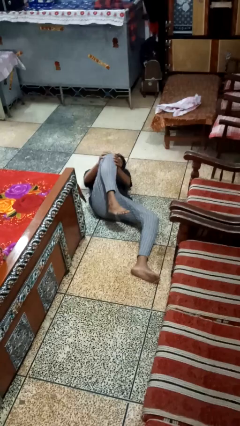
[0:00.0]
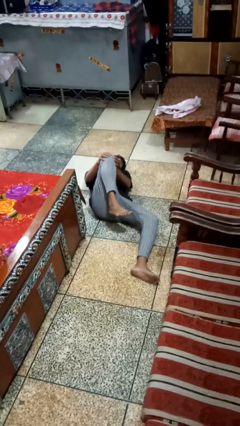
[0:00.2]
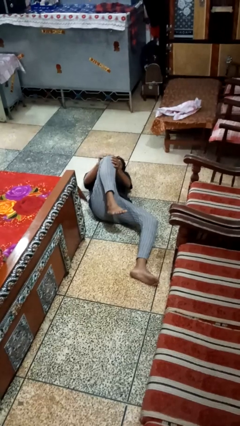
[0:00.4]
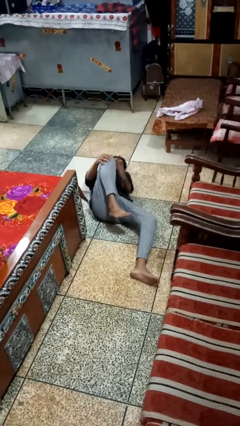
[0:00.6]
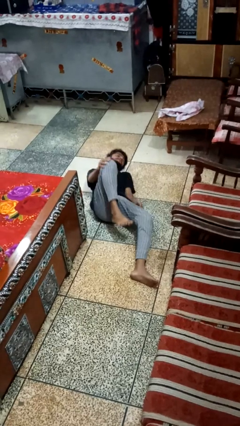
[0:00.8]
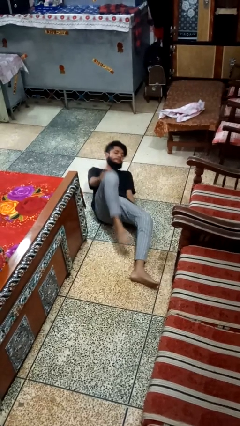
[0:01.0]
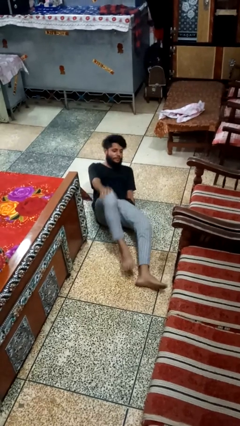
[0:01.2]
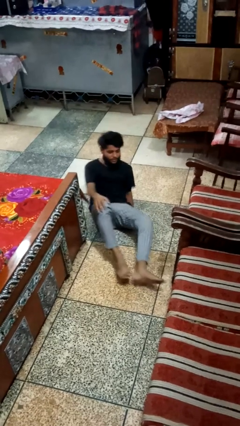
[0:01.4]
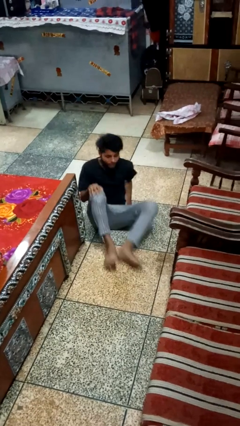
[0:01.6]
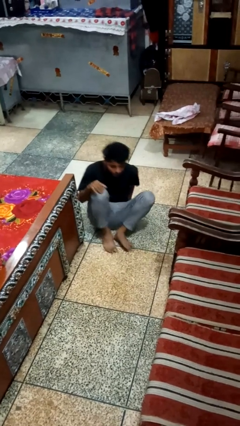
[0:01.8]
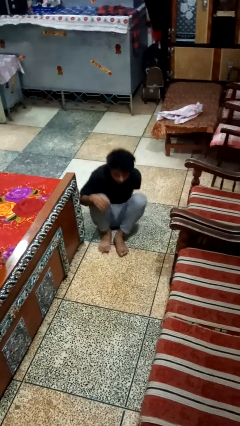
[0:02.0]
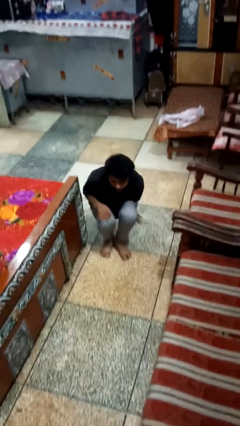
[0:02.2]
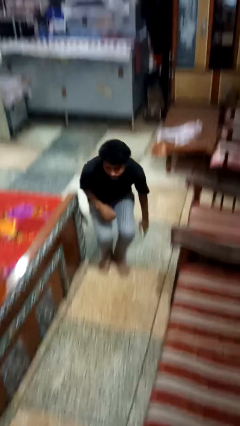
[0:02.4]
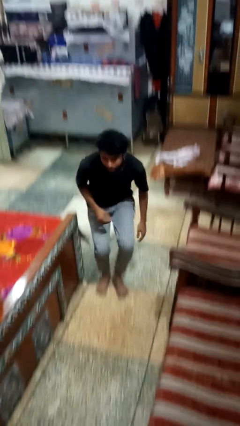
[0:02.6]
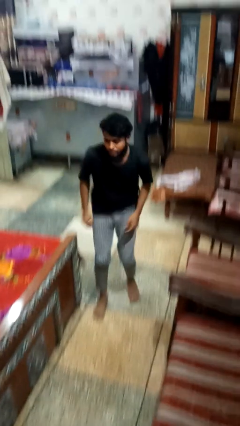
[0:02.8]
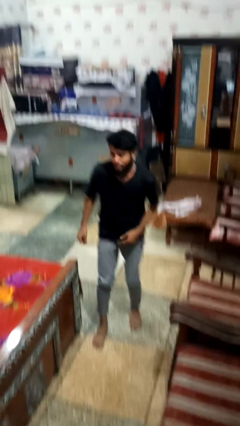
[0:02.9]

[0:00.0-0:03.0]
person stands up from floor

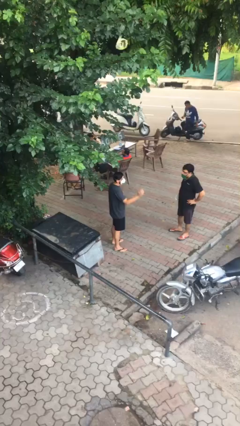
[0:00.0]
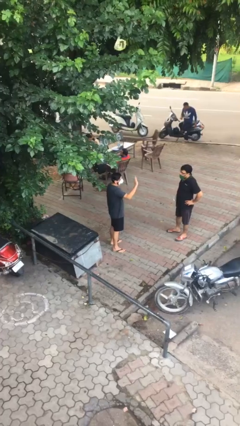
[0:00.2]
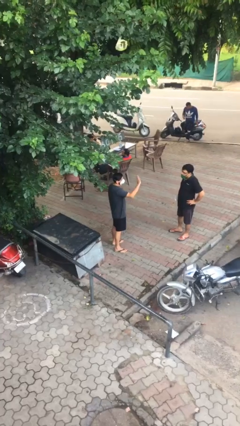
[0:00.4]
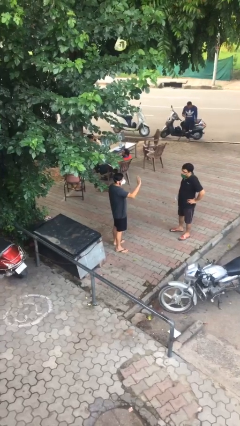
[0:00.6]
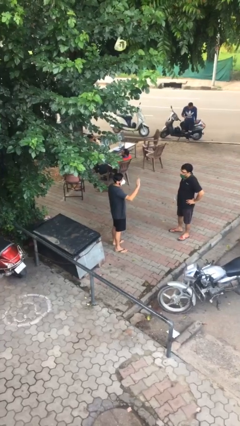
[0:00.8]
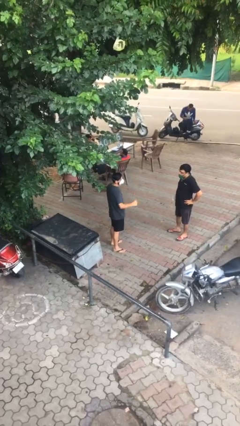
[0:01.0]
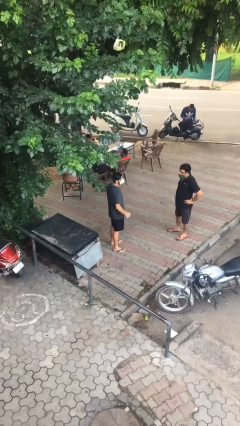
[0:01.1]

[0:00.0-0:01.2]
person waves at person

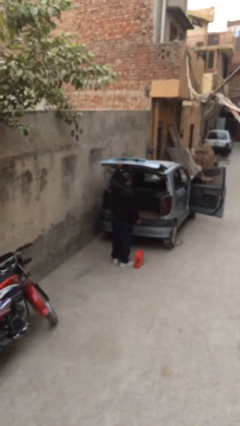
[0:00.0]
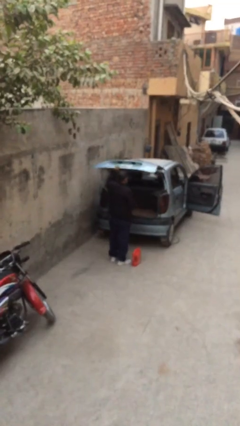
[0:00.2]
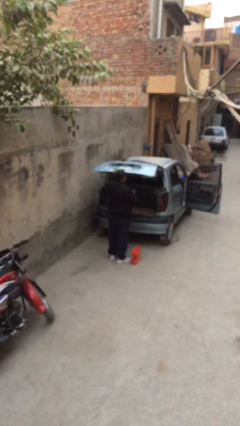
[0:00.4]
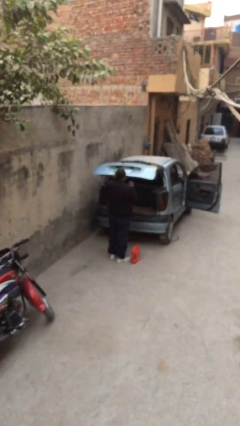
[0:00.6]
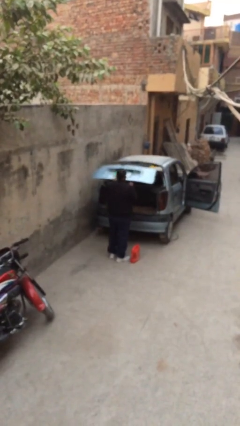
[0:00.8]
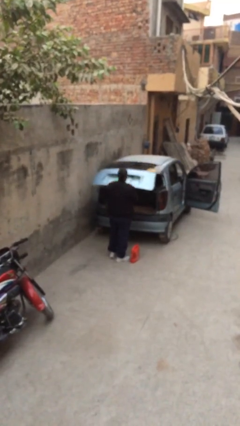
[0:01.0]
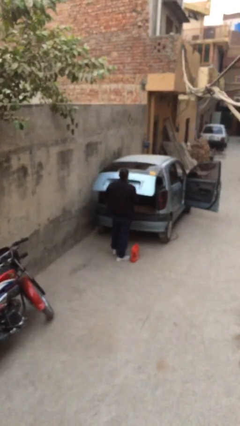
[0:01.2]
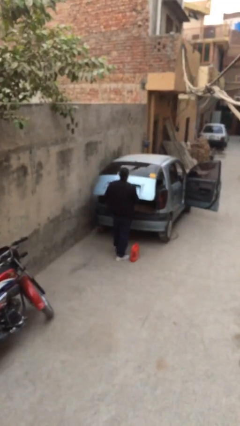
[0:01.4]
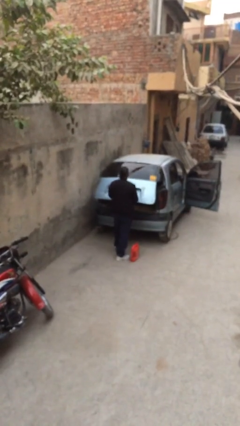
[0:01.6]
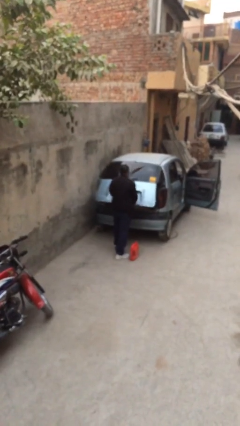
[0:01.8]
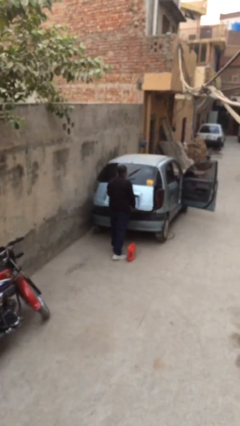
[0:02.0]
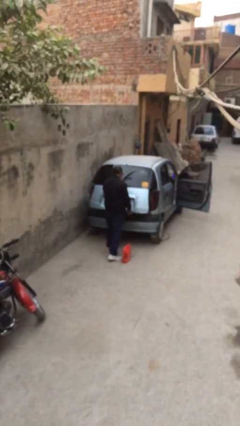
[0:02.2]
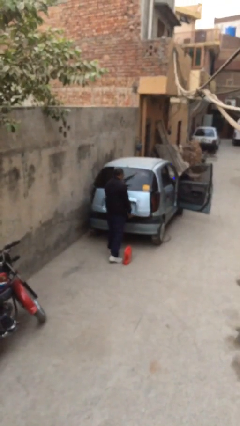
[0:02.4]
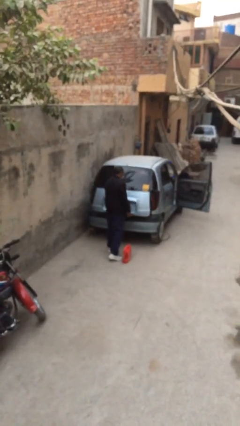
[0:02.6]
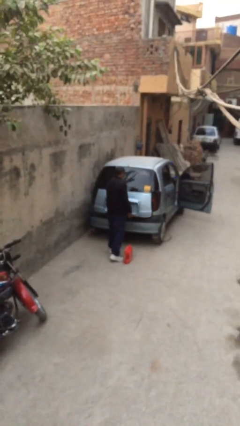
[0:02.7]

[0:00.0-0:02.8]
person closes car trunk

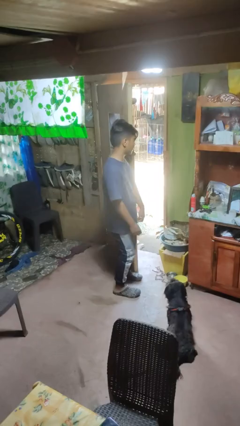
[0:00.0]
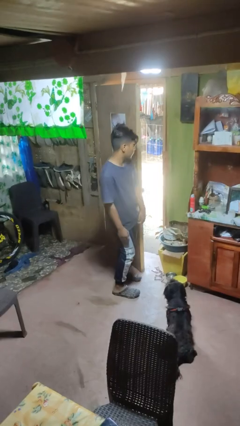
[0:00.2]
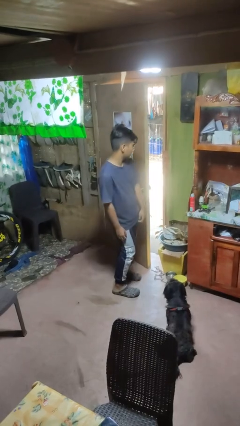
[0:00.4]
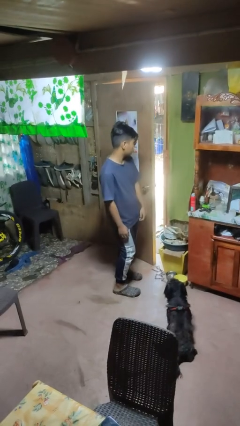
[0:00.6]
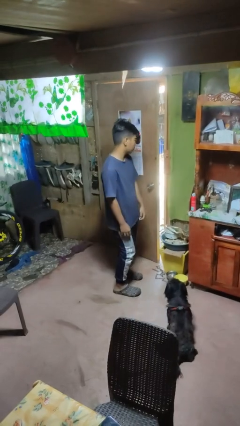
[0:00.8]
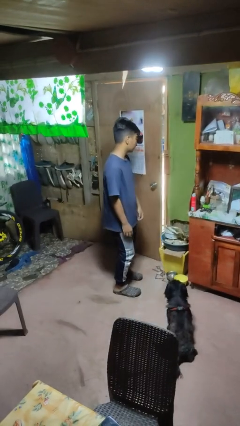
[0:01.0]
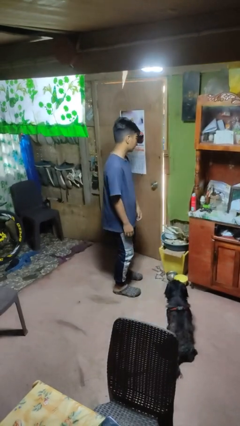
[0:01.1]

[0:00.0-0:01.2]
person closes door with hip

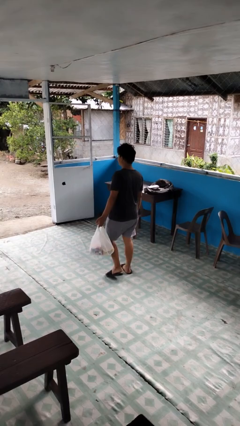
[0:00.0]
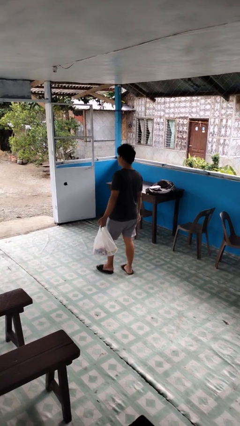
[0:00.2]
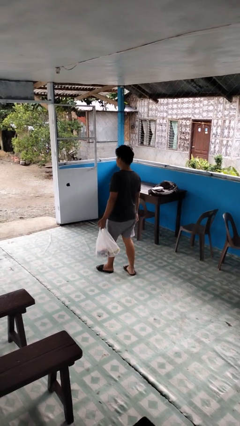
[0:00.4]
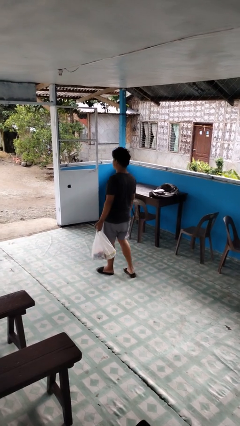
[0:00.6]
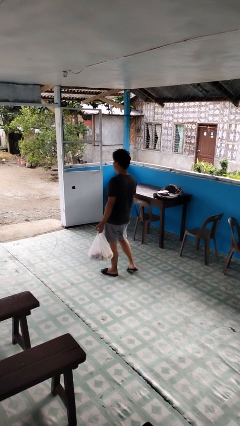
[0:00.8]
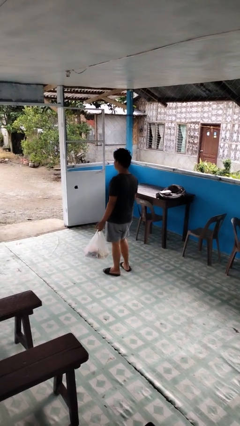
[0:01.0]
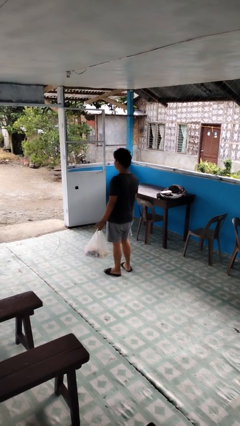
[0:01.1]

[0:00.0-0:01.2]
person carries groceries

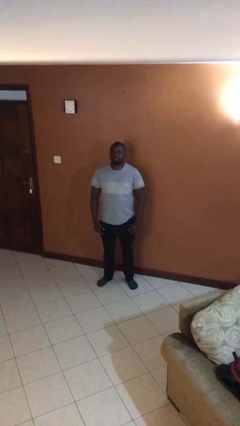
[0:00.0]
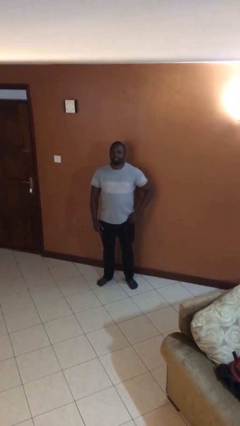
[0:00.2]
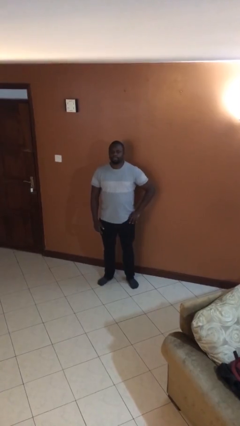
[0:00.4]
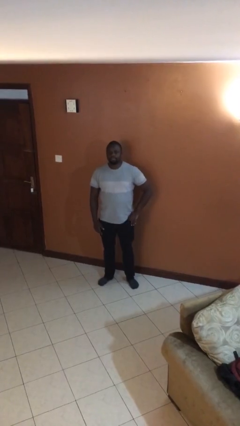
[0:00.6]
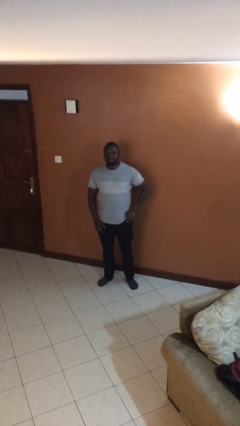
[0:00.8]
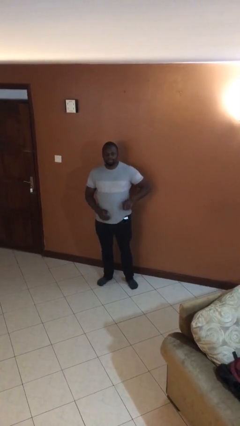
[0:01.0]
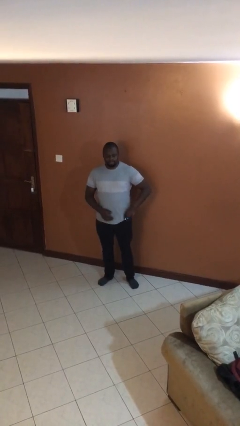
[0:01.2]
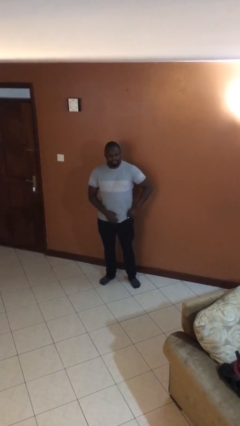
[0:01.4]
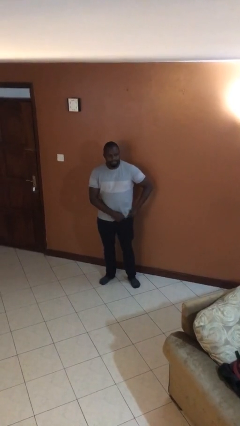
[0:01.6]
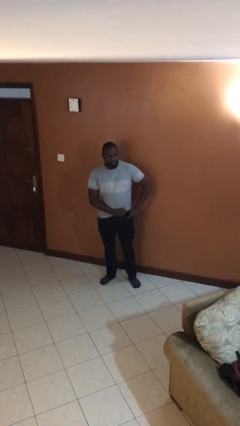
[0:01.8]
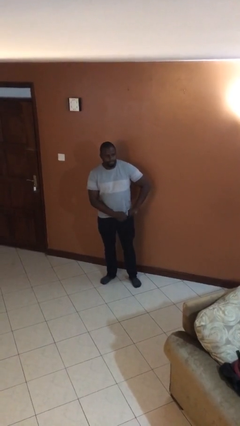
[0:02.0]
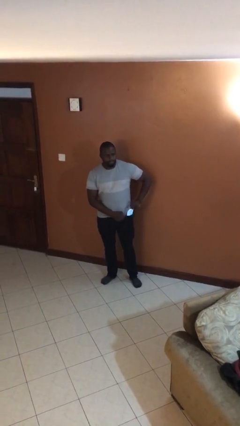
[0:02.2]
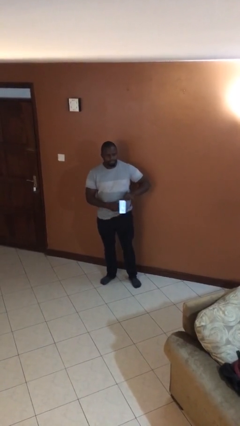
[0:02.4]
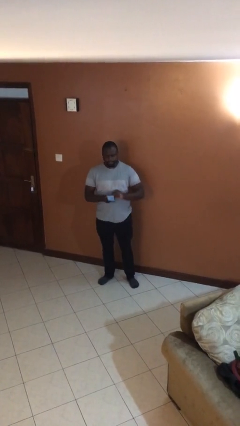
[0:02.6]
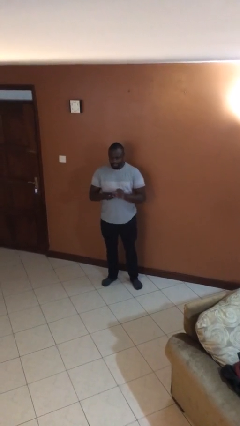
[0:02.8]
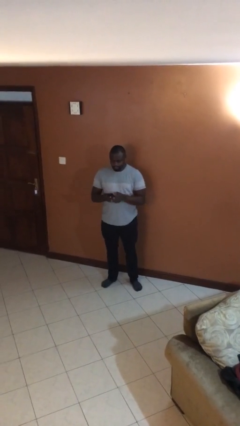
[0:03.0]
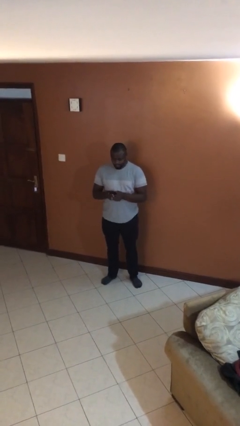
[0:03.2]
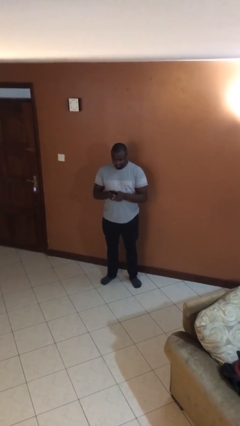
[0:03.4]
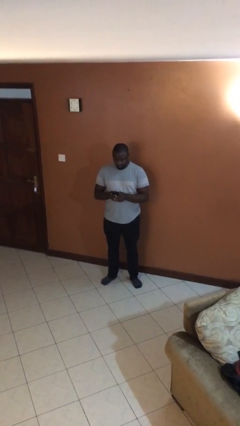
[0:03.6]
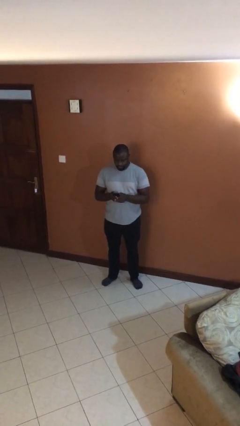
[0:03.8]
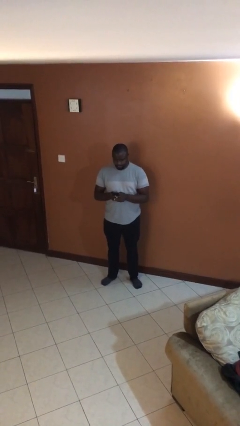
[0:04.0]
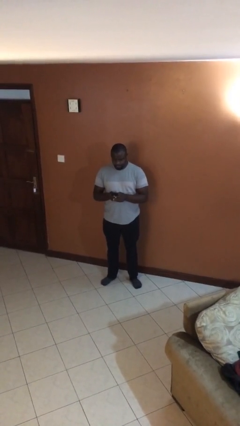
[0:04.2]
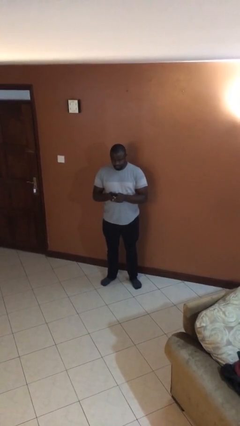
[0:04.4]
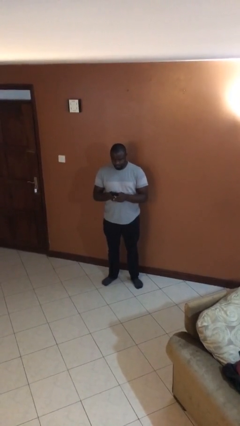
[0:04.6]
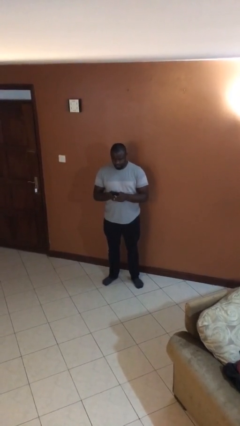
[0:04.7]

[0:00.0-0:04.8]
person takes phone from pocket

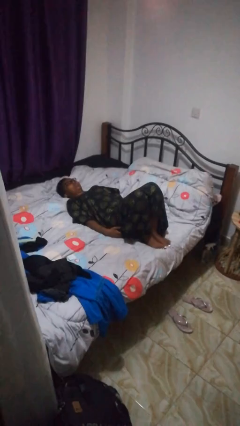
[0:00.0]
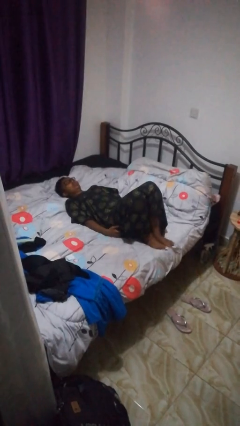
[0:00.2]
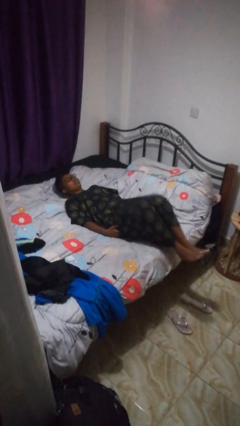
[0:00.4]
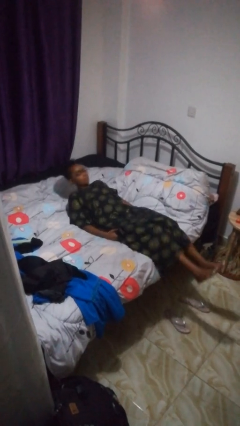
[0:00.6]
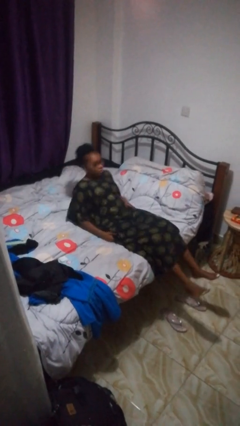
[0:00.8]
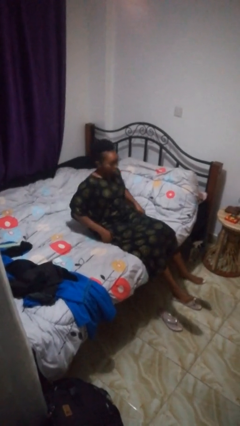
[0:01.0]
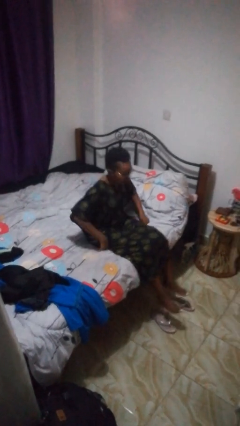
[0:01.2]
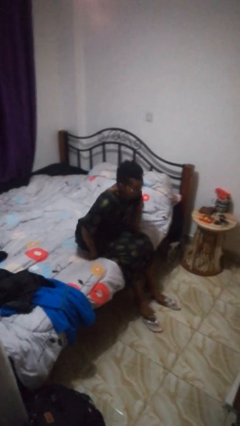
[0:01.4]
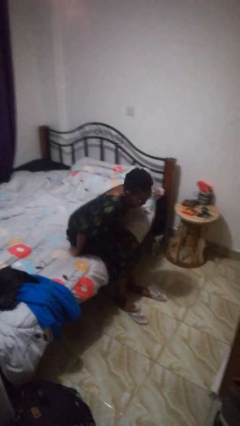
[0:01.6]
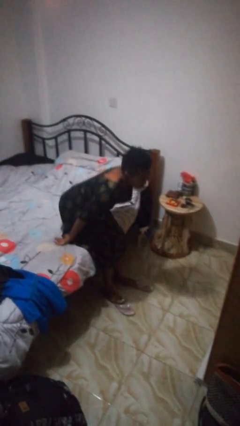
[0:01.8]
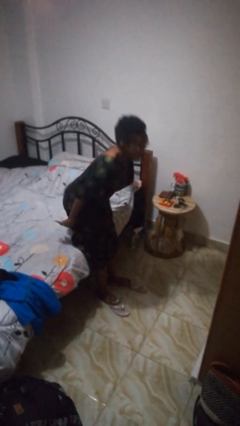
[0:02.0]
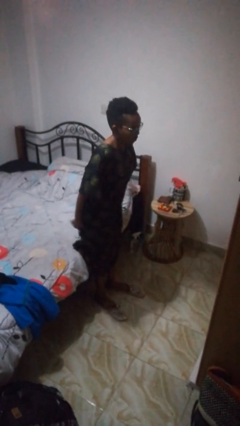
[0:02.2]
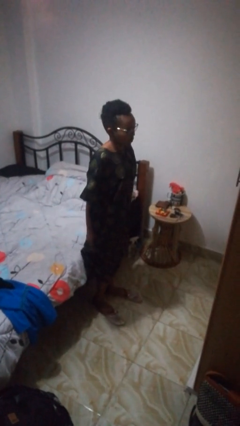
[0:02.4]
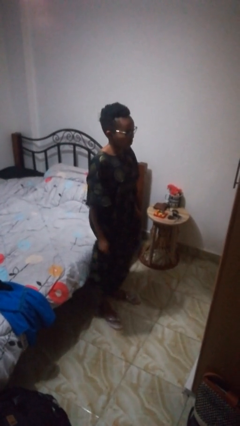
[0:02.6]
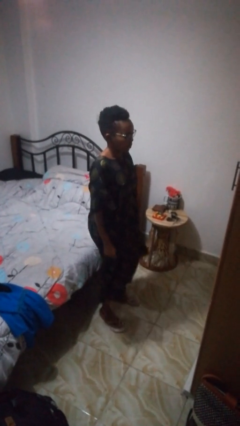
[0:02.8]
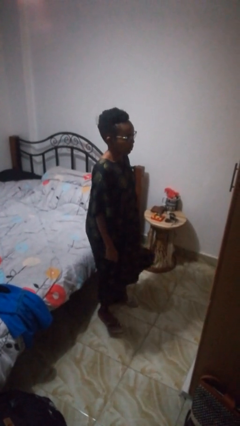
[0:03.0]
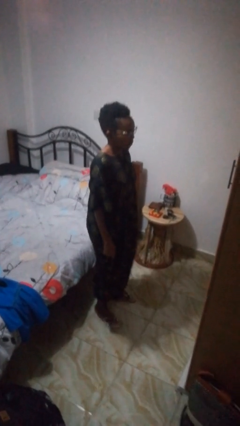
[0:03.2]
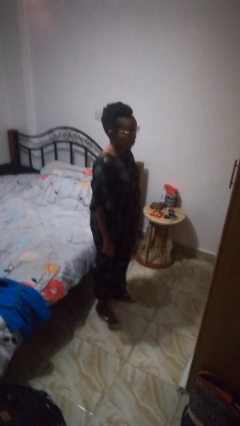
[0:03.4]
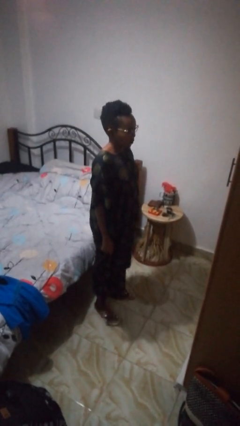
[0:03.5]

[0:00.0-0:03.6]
person stands up
